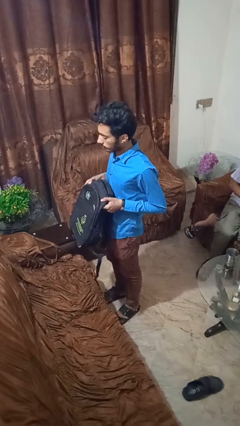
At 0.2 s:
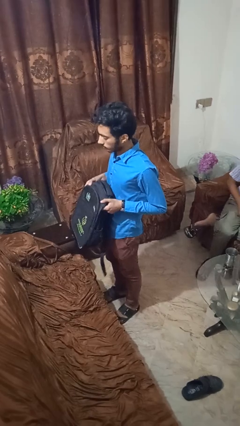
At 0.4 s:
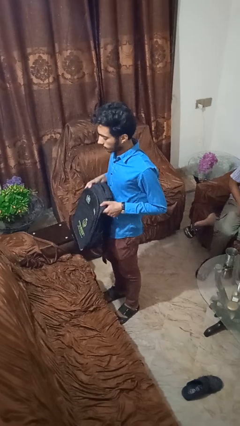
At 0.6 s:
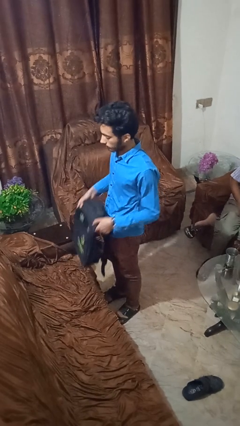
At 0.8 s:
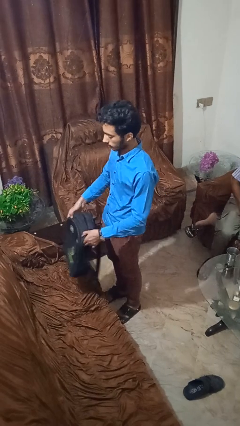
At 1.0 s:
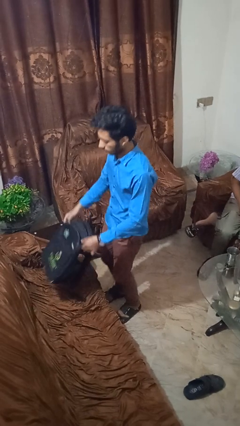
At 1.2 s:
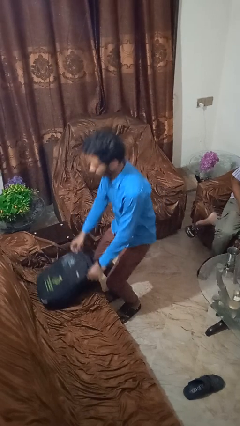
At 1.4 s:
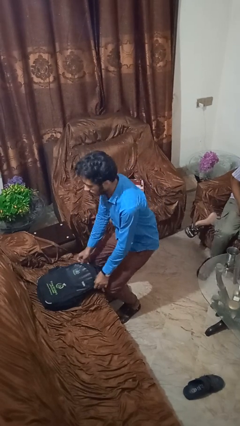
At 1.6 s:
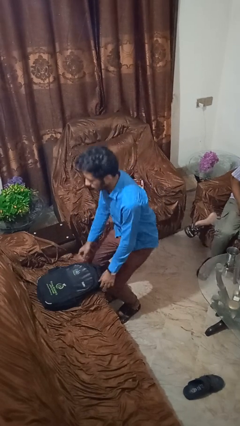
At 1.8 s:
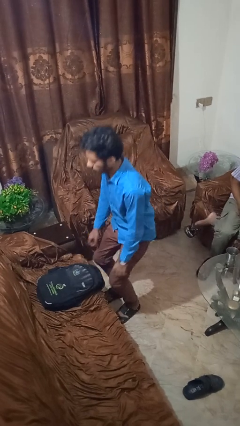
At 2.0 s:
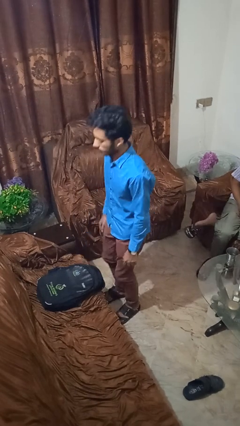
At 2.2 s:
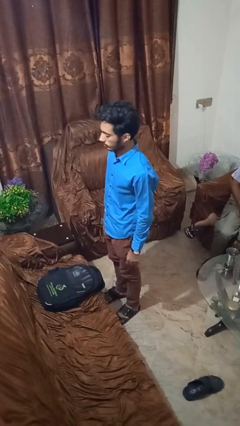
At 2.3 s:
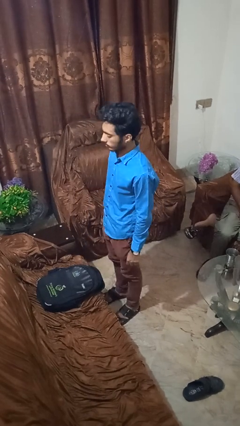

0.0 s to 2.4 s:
person puts down object on couch

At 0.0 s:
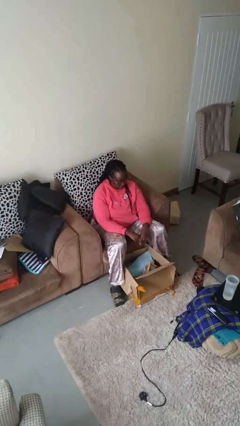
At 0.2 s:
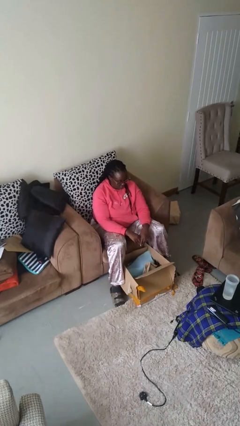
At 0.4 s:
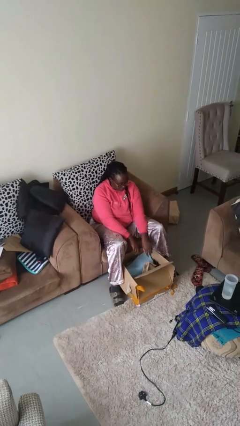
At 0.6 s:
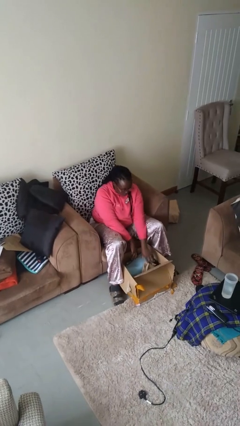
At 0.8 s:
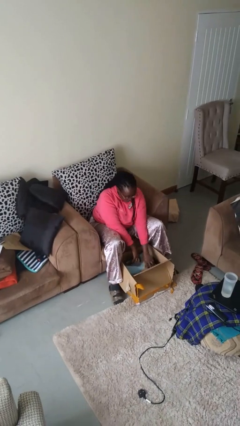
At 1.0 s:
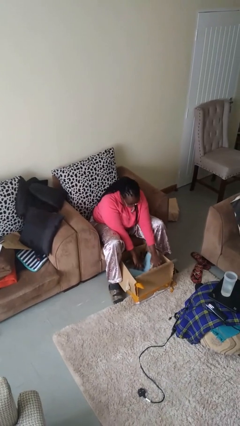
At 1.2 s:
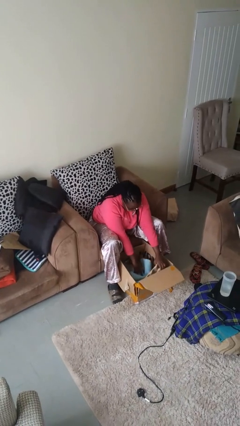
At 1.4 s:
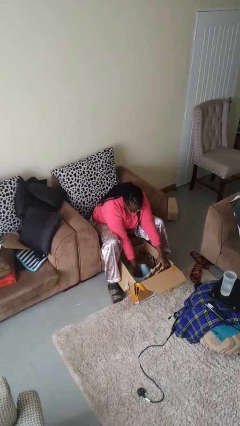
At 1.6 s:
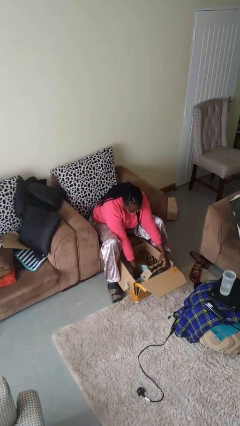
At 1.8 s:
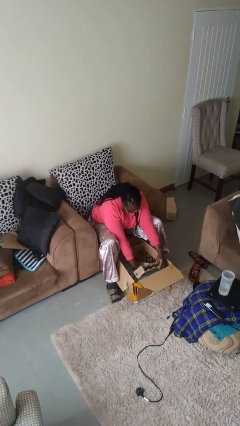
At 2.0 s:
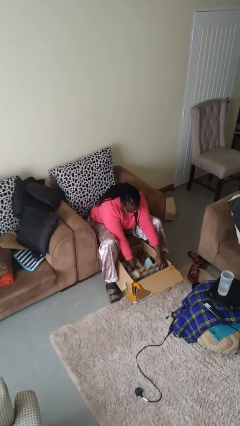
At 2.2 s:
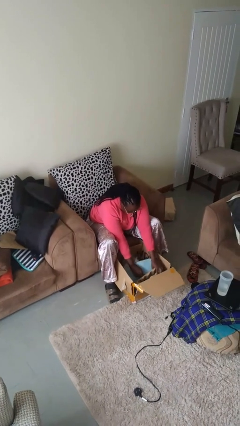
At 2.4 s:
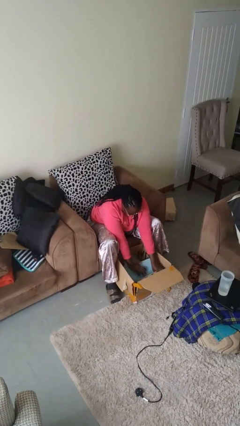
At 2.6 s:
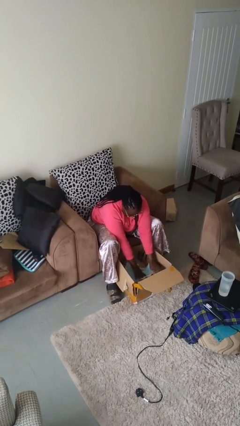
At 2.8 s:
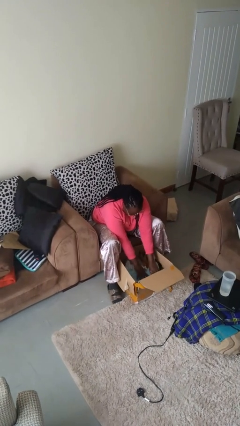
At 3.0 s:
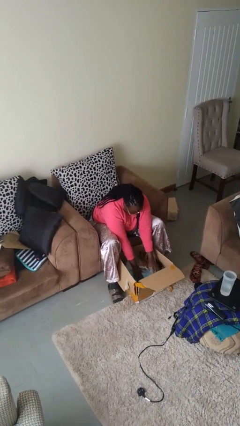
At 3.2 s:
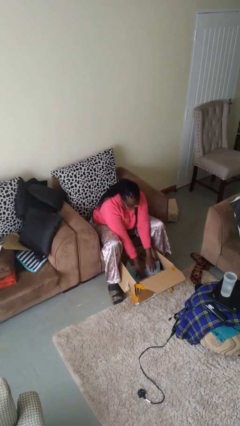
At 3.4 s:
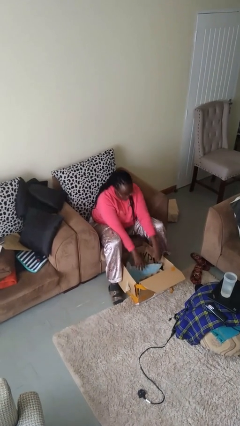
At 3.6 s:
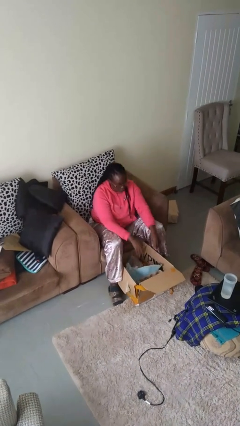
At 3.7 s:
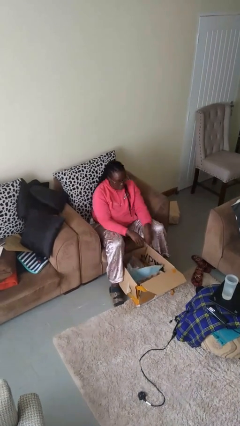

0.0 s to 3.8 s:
person searches in box

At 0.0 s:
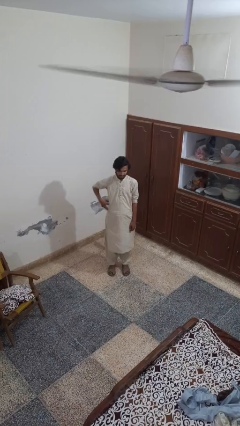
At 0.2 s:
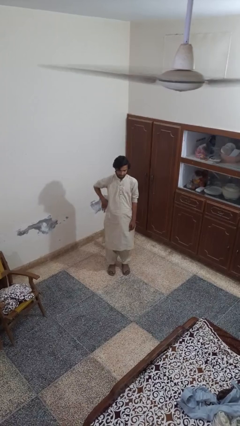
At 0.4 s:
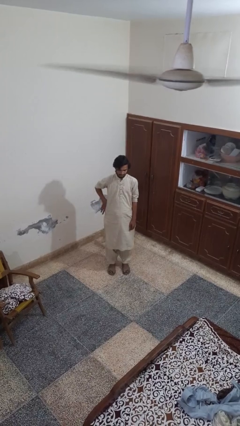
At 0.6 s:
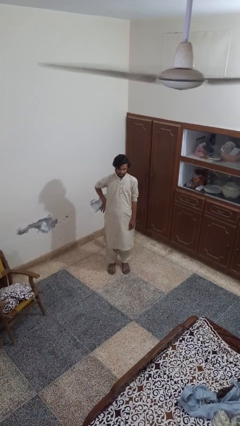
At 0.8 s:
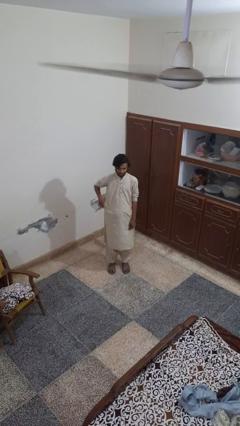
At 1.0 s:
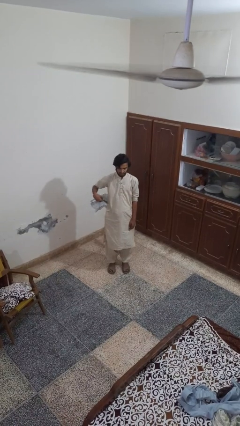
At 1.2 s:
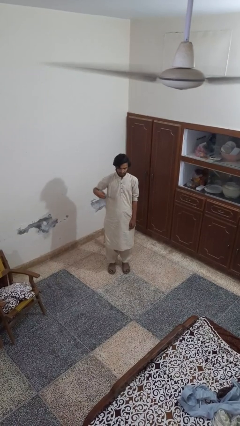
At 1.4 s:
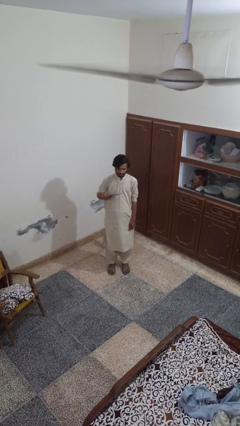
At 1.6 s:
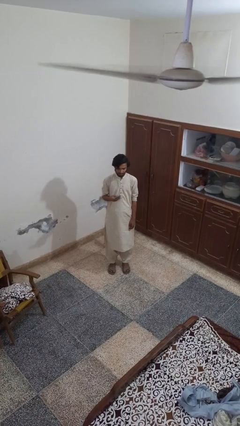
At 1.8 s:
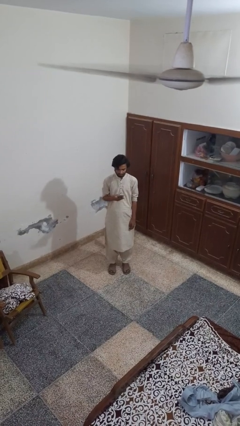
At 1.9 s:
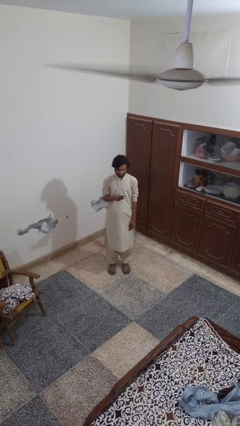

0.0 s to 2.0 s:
person takes phone from pocket

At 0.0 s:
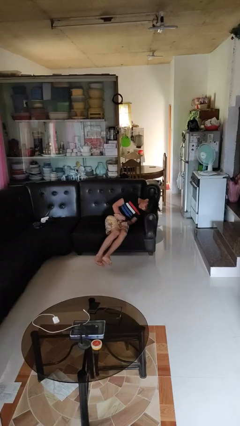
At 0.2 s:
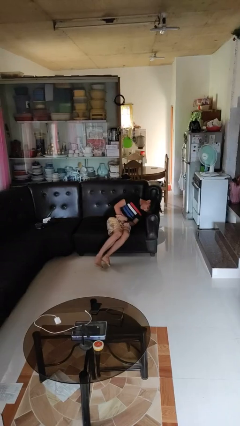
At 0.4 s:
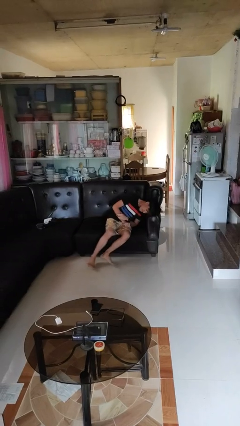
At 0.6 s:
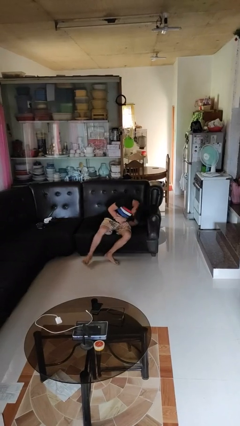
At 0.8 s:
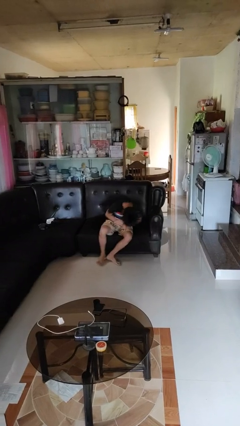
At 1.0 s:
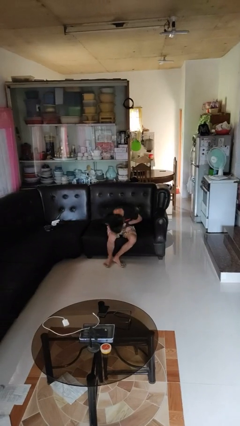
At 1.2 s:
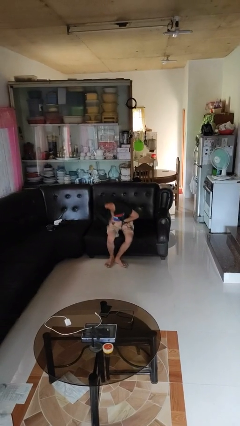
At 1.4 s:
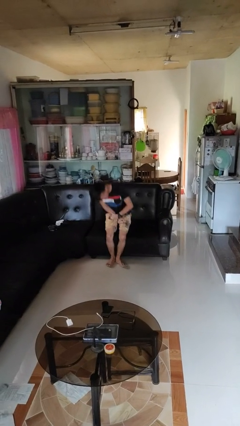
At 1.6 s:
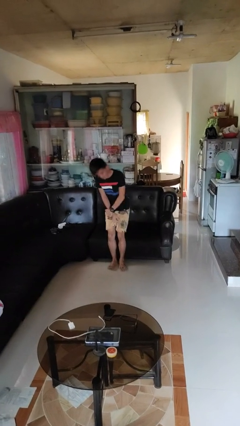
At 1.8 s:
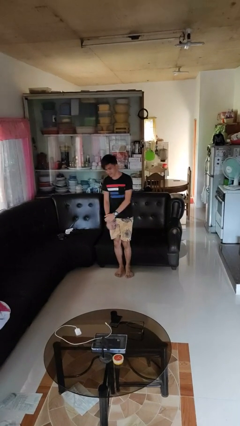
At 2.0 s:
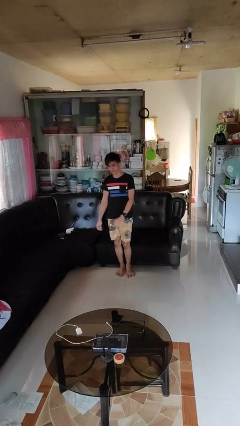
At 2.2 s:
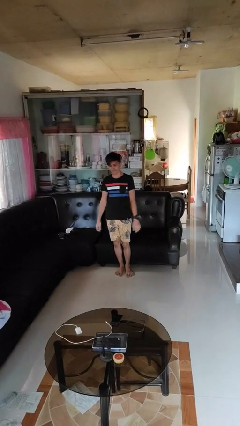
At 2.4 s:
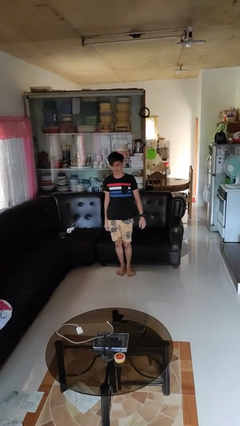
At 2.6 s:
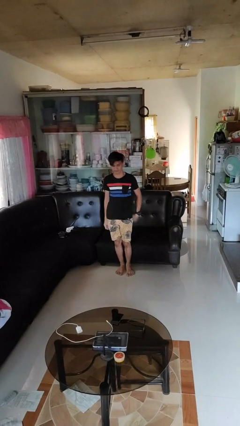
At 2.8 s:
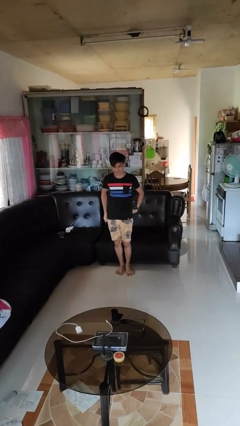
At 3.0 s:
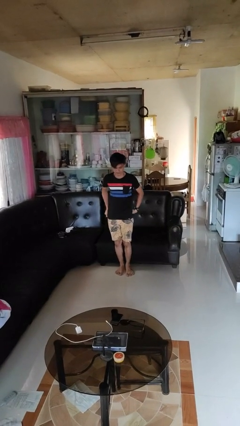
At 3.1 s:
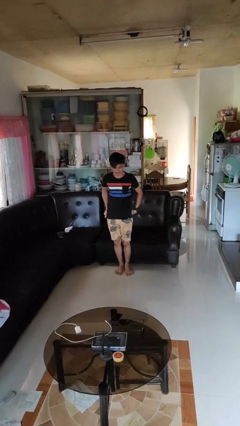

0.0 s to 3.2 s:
person stands up

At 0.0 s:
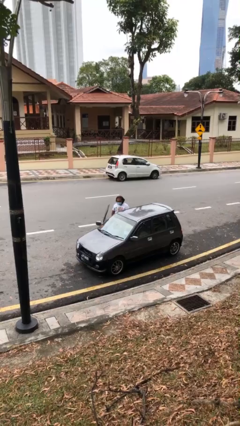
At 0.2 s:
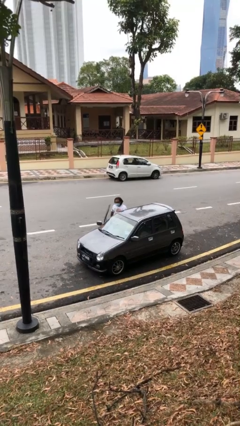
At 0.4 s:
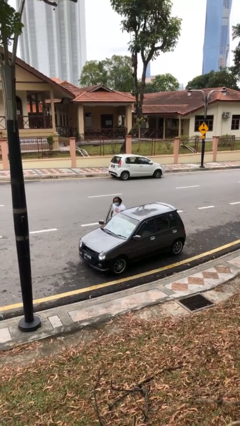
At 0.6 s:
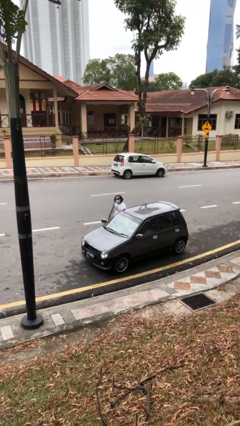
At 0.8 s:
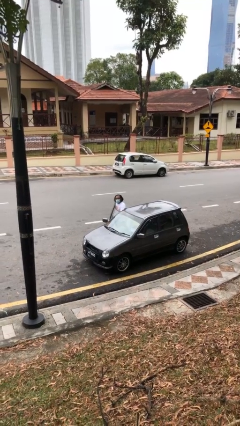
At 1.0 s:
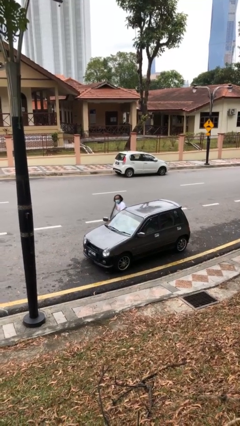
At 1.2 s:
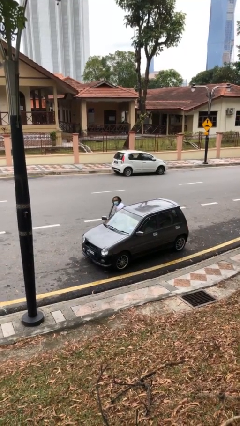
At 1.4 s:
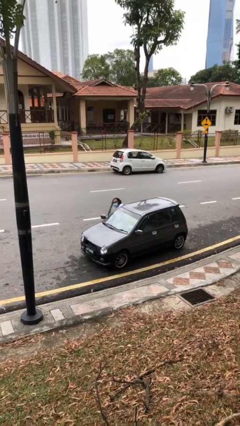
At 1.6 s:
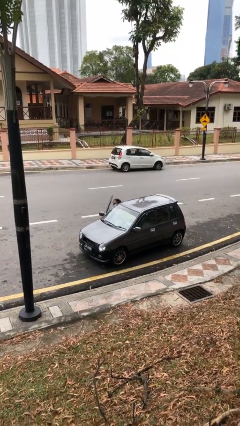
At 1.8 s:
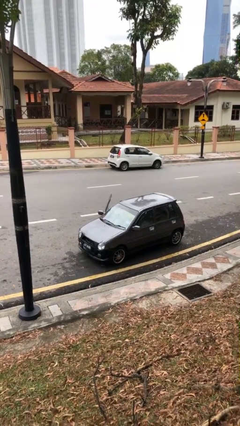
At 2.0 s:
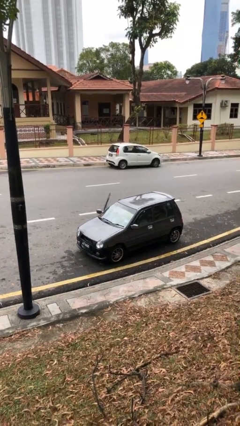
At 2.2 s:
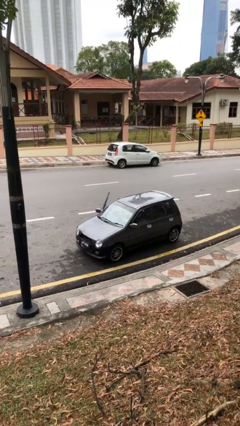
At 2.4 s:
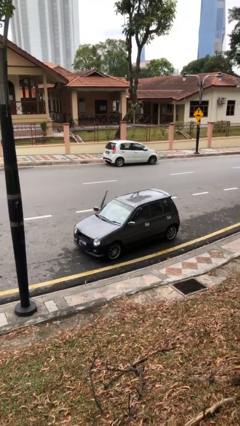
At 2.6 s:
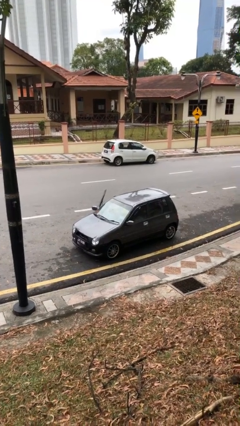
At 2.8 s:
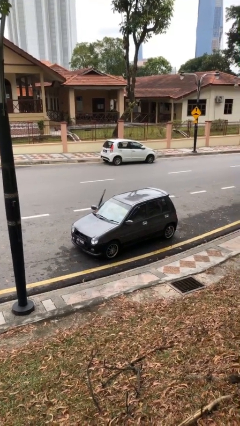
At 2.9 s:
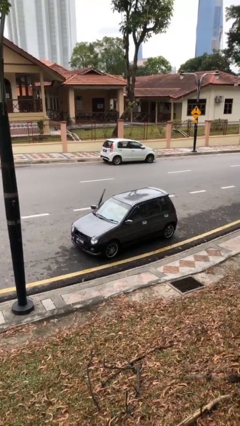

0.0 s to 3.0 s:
person enters car

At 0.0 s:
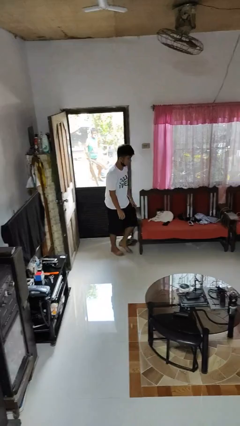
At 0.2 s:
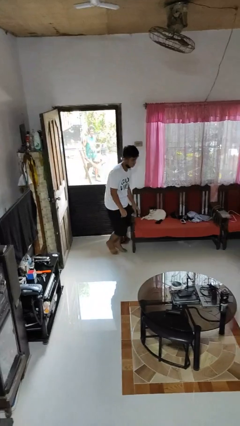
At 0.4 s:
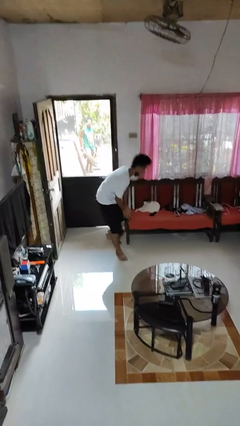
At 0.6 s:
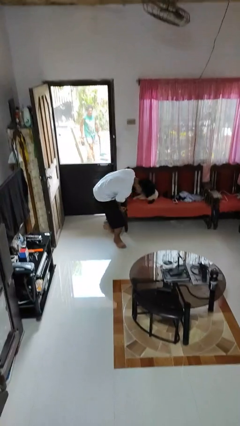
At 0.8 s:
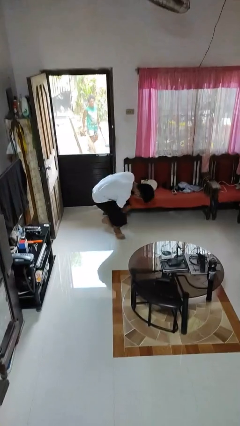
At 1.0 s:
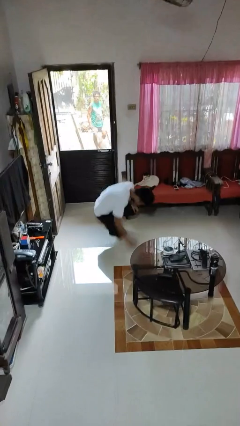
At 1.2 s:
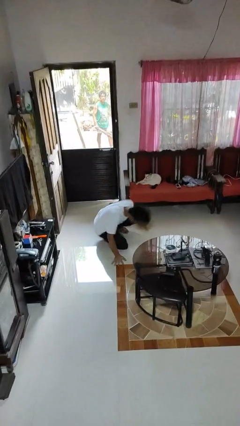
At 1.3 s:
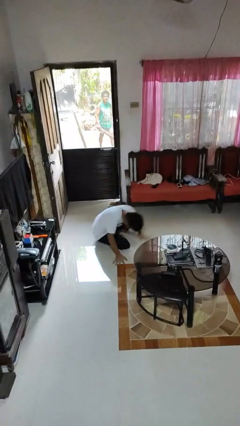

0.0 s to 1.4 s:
person trips on object on floor

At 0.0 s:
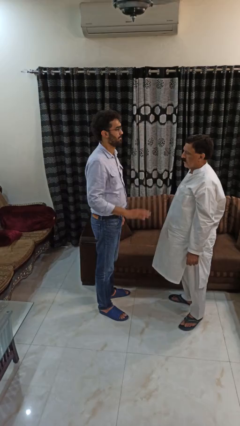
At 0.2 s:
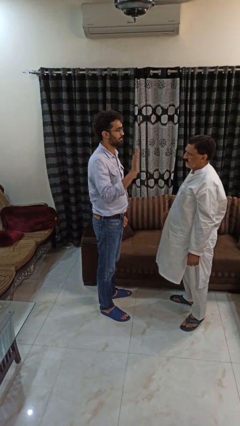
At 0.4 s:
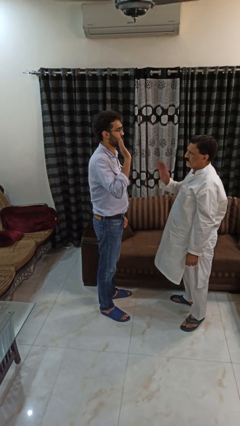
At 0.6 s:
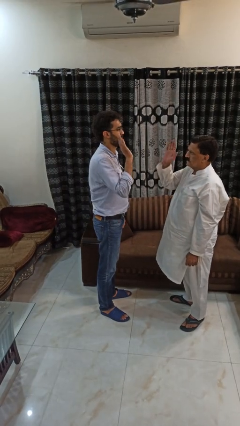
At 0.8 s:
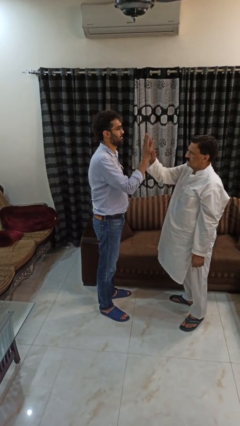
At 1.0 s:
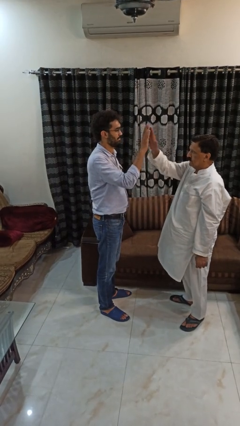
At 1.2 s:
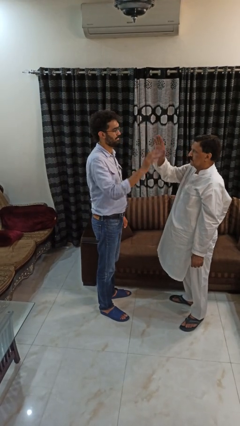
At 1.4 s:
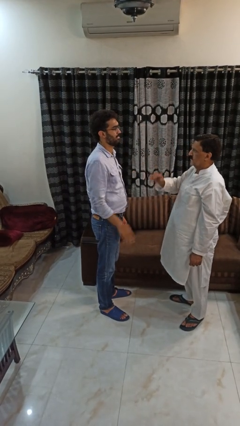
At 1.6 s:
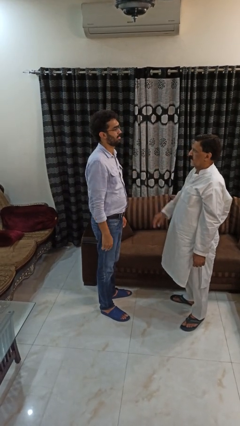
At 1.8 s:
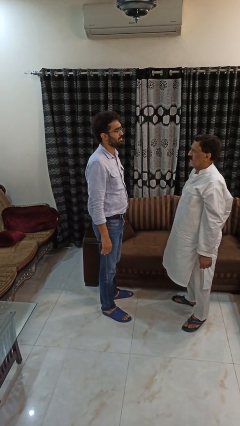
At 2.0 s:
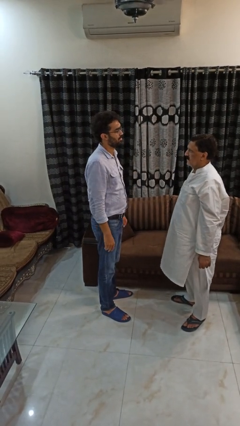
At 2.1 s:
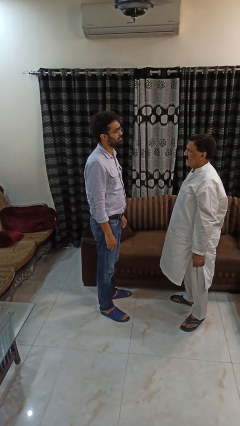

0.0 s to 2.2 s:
person highfives hand
